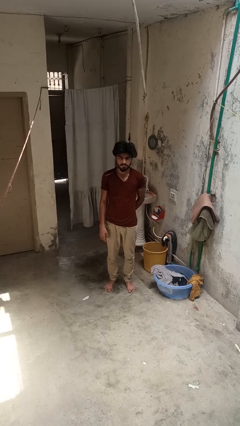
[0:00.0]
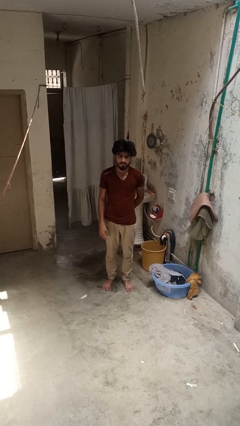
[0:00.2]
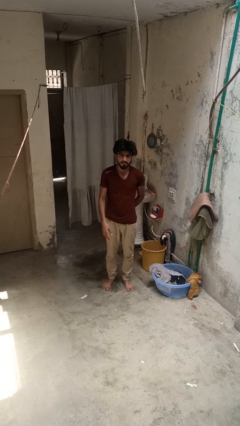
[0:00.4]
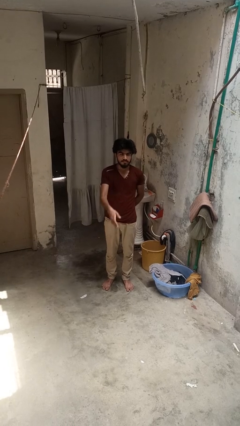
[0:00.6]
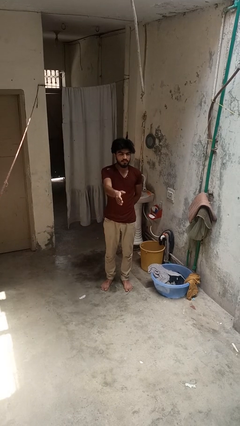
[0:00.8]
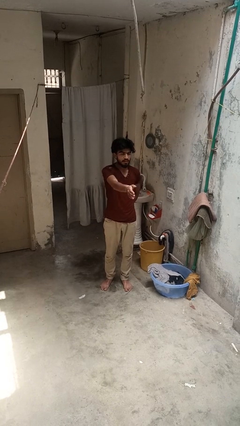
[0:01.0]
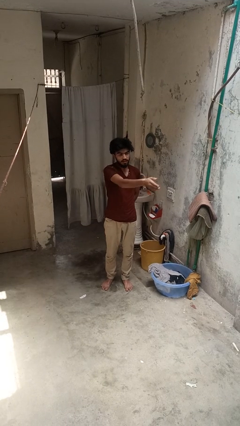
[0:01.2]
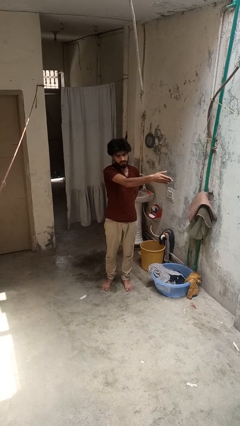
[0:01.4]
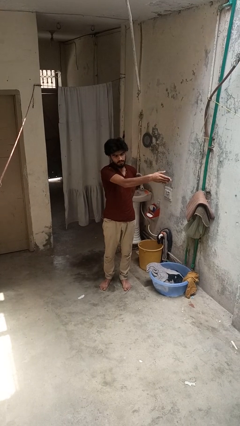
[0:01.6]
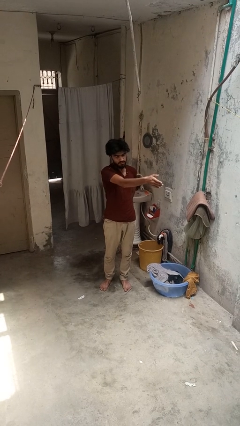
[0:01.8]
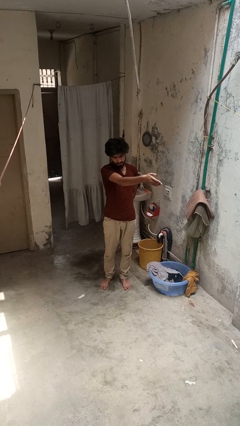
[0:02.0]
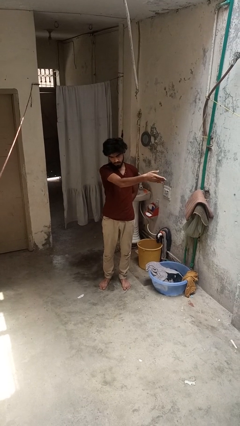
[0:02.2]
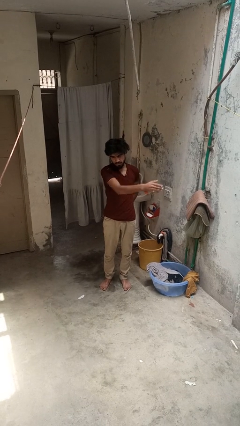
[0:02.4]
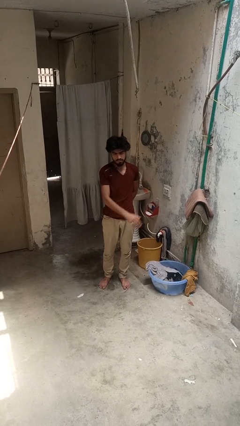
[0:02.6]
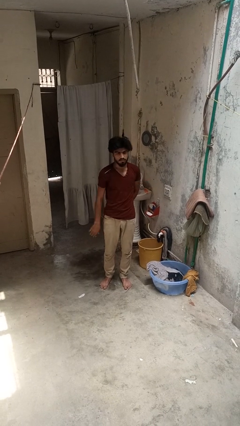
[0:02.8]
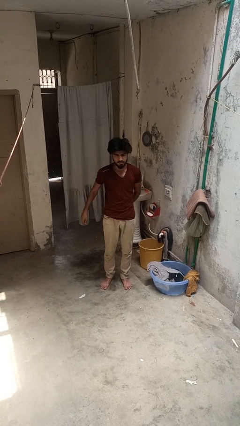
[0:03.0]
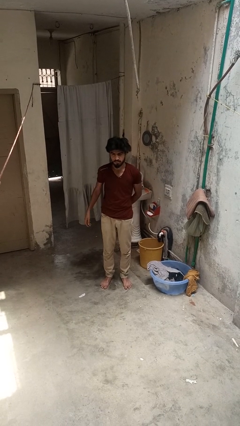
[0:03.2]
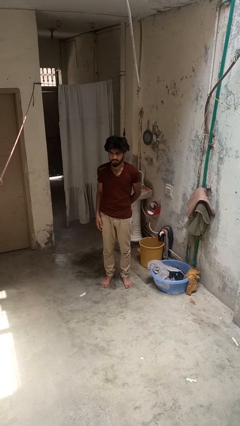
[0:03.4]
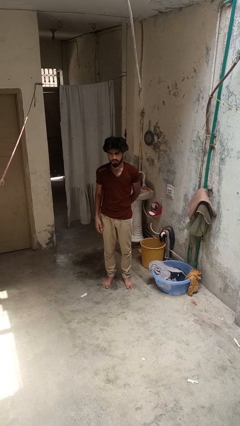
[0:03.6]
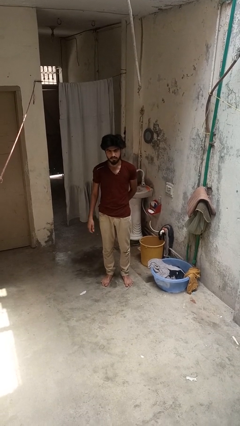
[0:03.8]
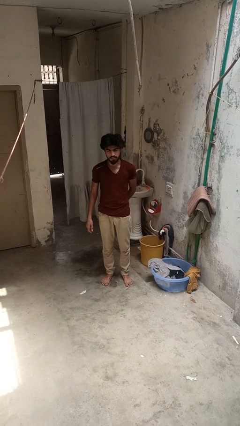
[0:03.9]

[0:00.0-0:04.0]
person gestures swipe left

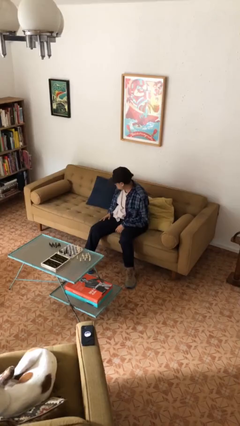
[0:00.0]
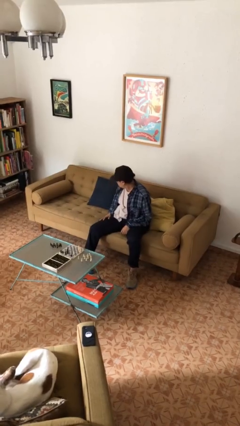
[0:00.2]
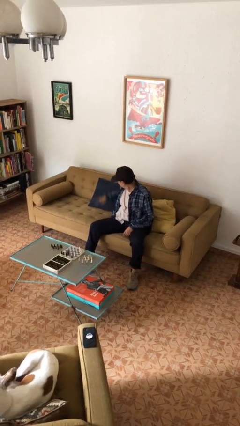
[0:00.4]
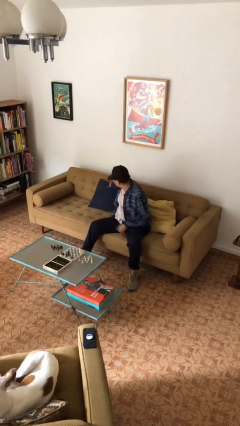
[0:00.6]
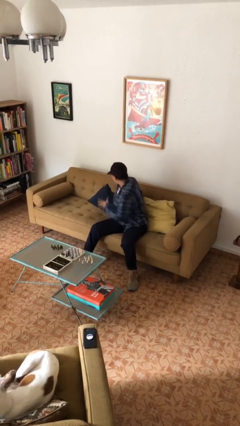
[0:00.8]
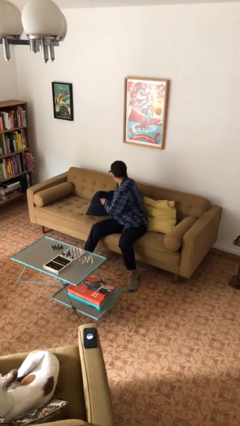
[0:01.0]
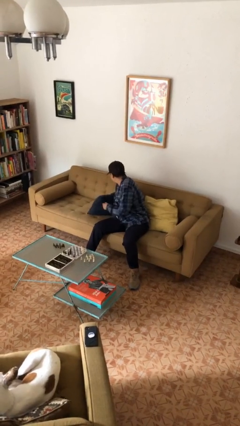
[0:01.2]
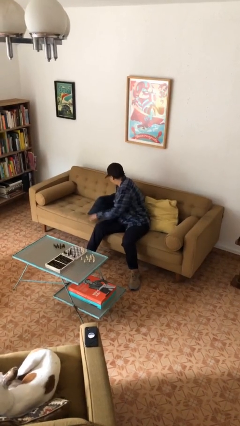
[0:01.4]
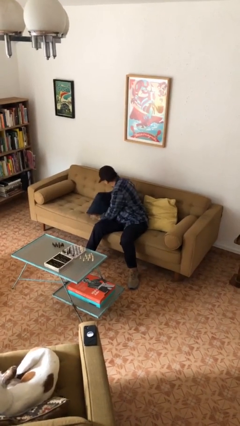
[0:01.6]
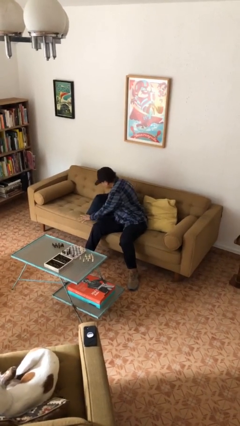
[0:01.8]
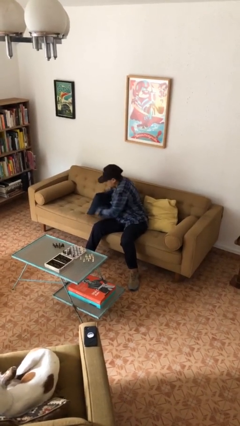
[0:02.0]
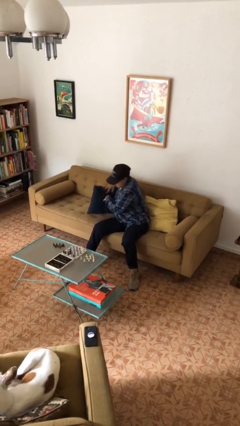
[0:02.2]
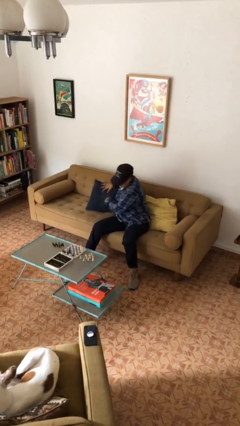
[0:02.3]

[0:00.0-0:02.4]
person searches in couch

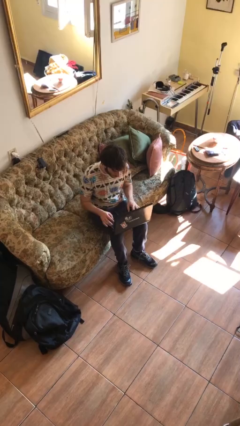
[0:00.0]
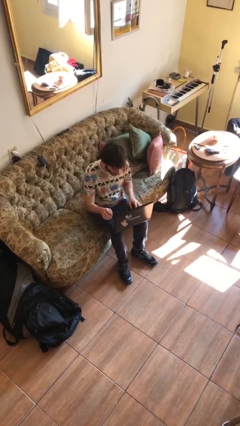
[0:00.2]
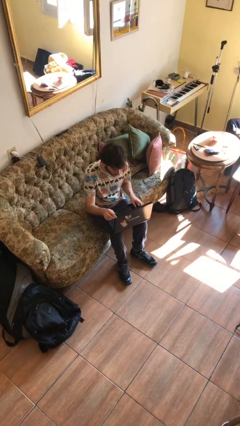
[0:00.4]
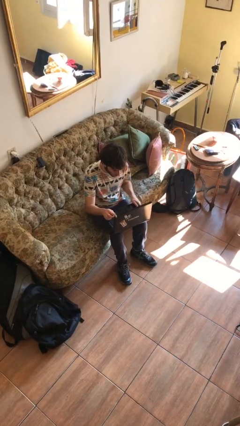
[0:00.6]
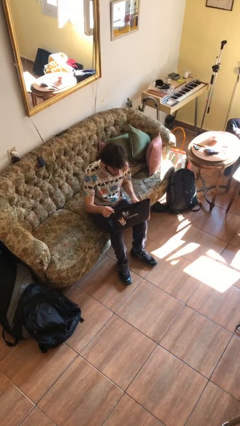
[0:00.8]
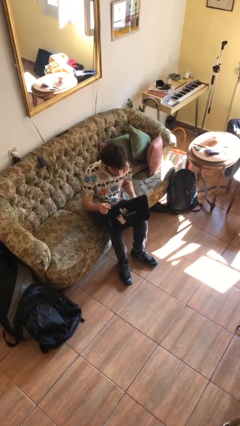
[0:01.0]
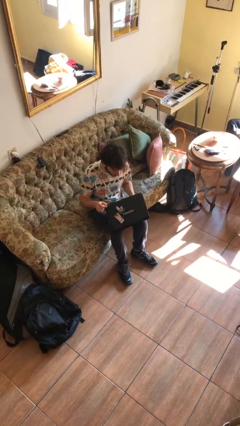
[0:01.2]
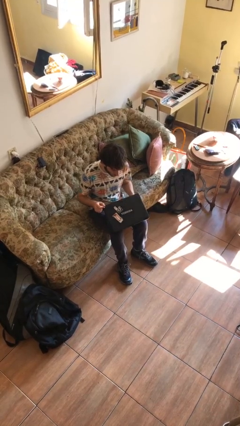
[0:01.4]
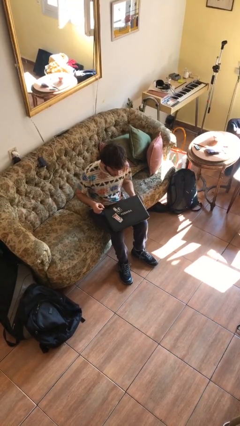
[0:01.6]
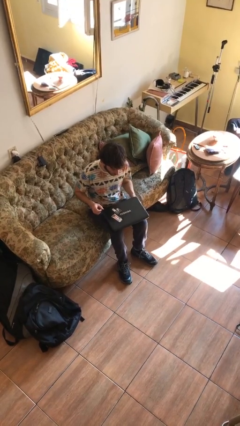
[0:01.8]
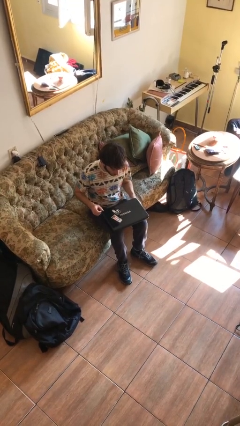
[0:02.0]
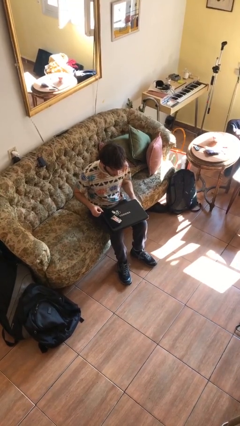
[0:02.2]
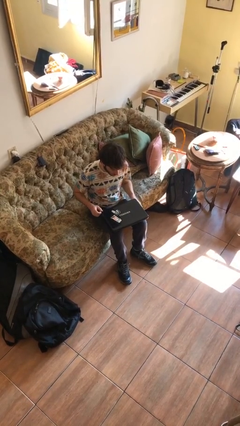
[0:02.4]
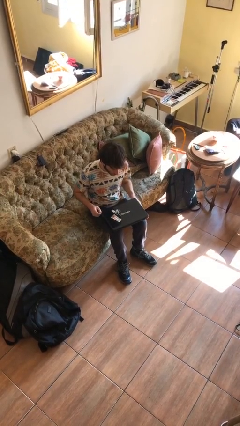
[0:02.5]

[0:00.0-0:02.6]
person closes laptop

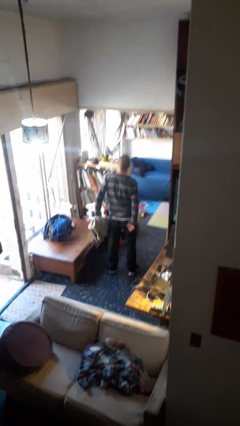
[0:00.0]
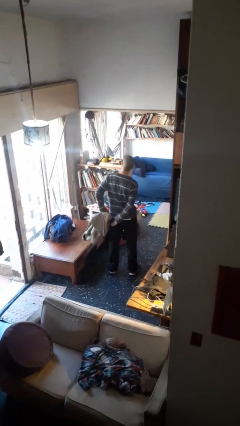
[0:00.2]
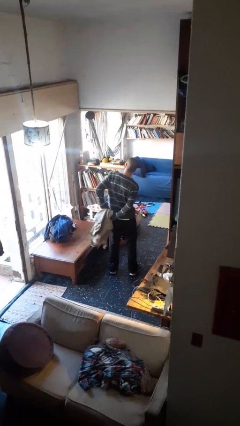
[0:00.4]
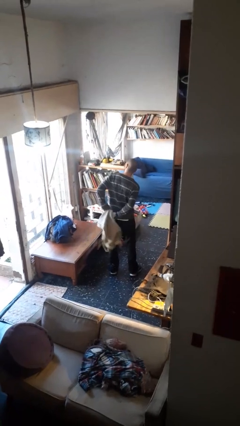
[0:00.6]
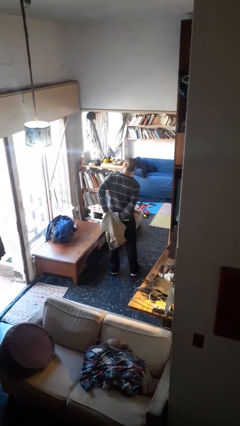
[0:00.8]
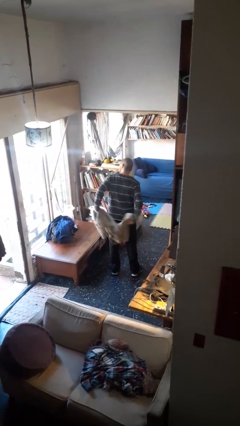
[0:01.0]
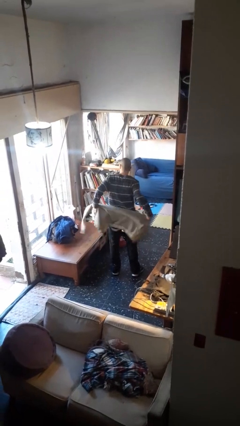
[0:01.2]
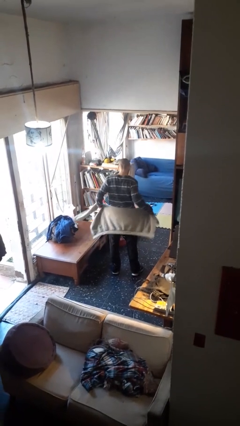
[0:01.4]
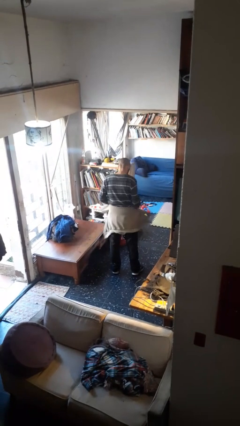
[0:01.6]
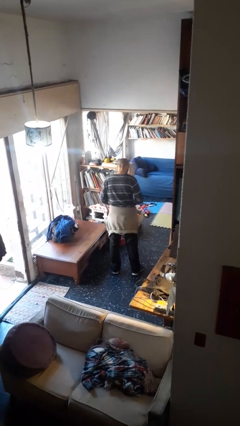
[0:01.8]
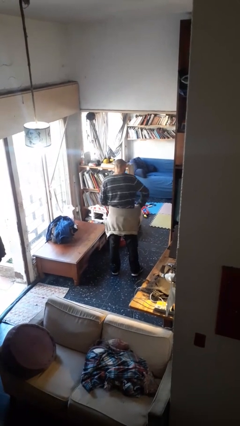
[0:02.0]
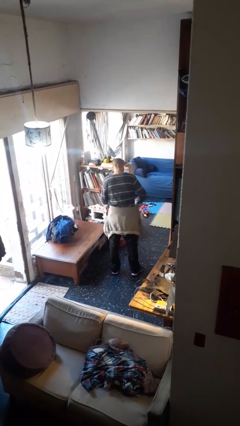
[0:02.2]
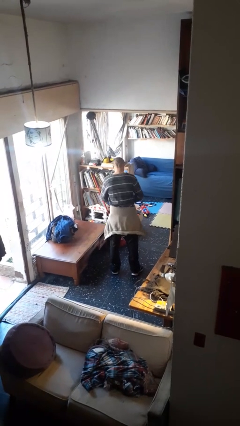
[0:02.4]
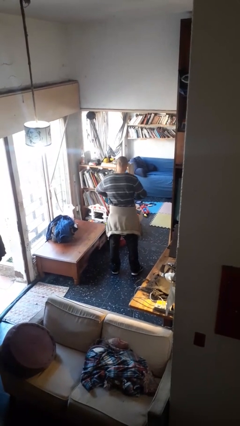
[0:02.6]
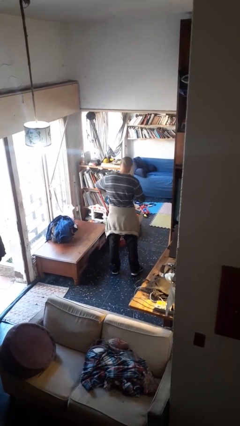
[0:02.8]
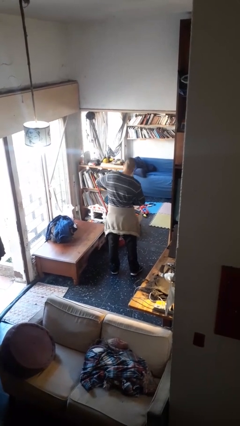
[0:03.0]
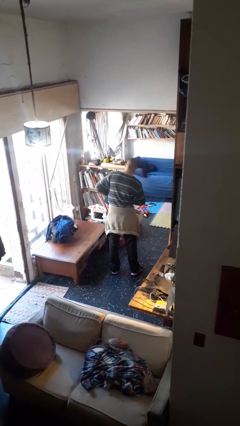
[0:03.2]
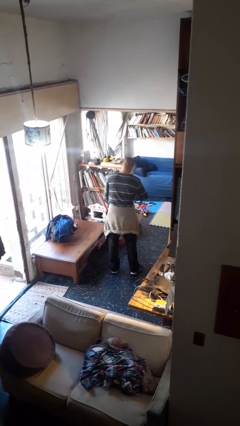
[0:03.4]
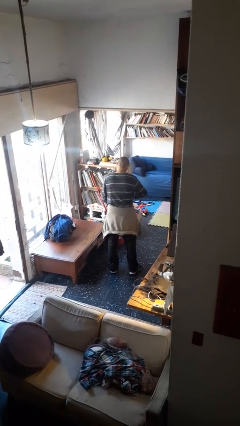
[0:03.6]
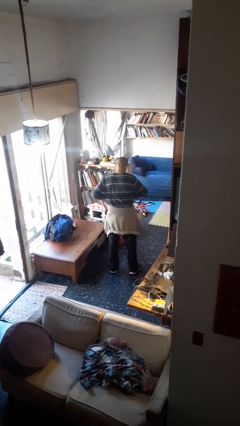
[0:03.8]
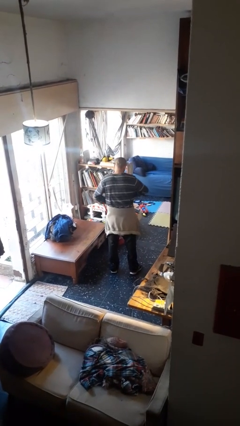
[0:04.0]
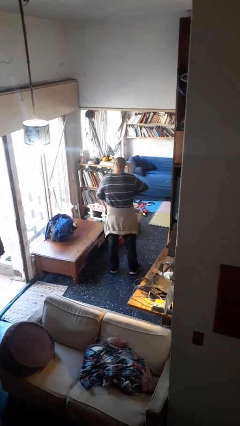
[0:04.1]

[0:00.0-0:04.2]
person ties jacket around waist

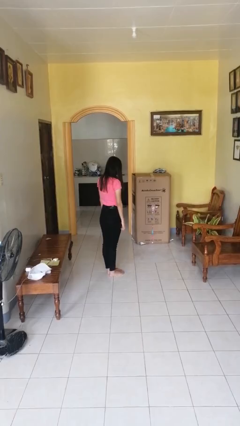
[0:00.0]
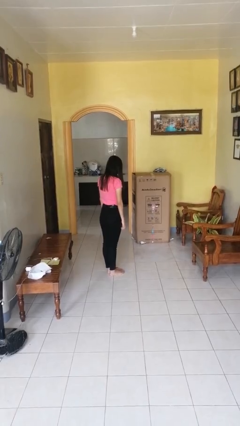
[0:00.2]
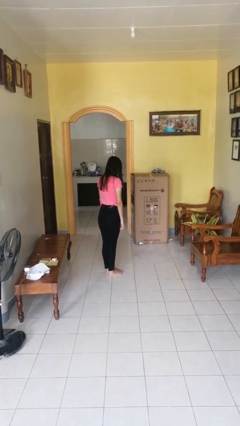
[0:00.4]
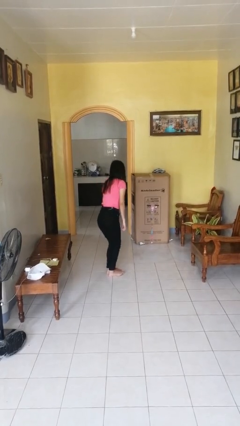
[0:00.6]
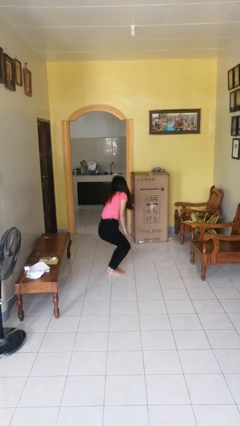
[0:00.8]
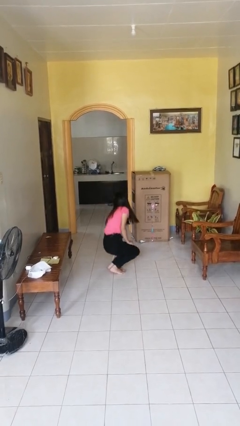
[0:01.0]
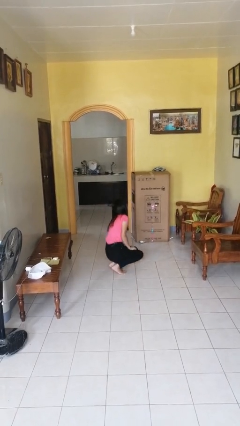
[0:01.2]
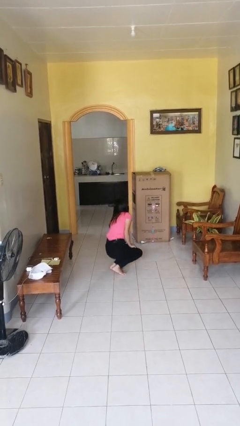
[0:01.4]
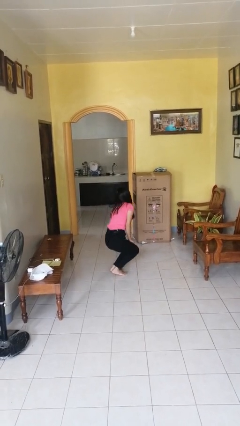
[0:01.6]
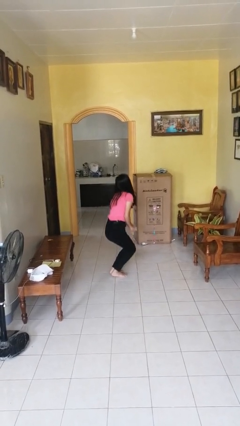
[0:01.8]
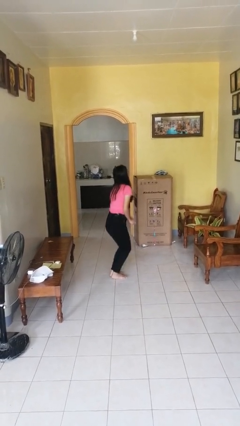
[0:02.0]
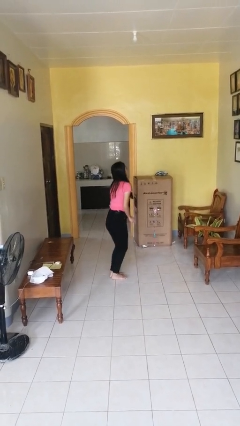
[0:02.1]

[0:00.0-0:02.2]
person picks up object from floor

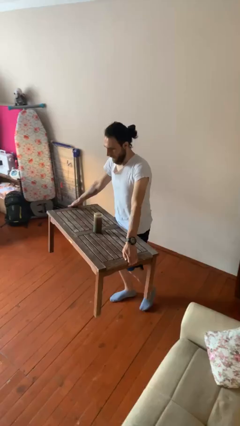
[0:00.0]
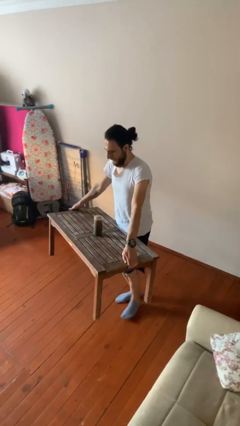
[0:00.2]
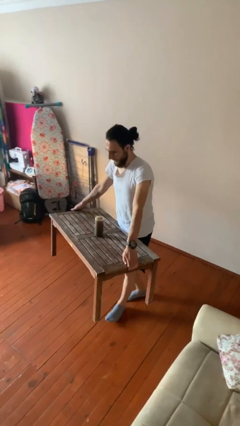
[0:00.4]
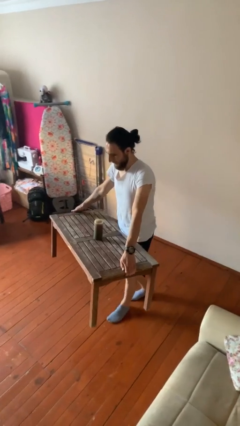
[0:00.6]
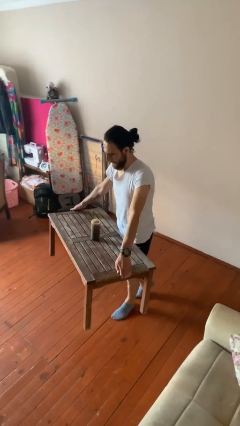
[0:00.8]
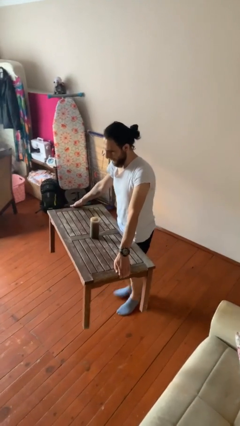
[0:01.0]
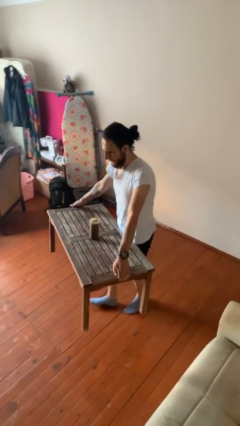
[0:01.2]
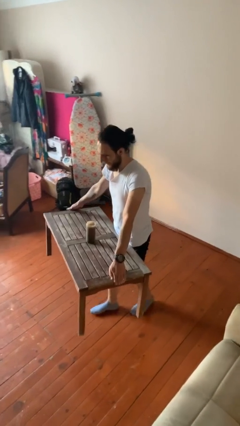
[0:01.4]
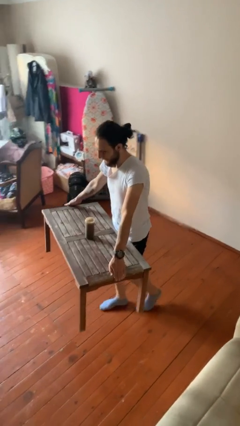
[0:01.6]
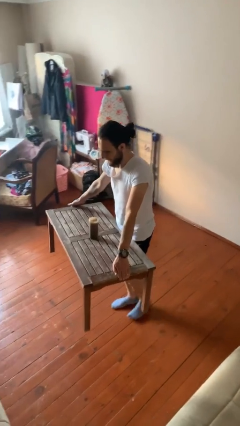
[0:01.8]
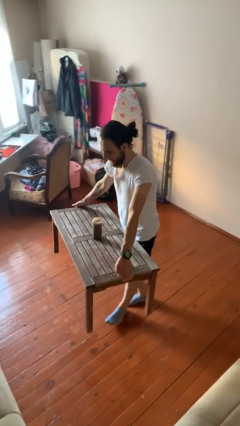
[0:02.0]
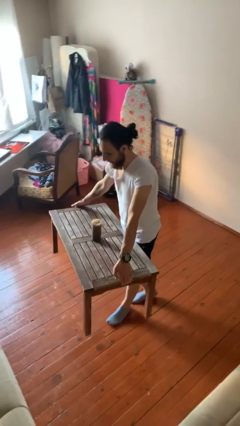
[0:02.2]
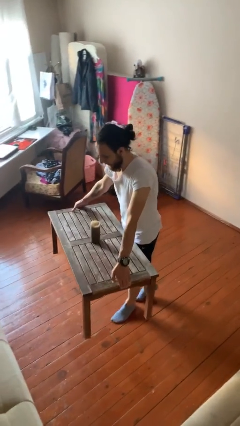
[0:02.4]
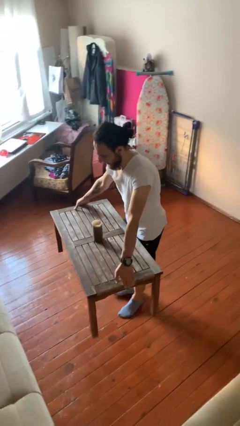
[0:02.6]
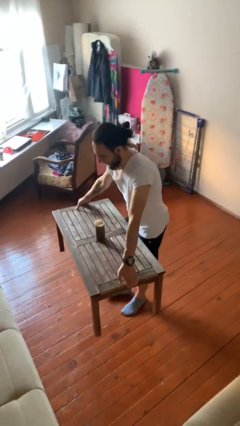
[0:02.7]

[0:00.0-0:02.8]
person carries heavy object
